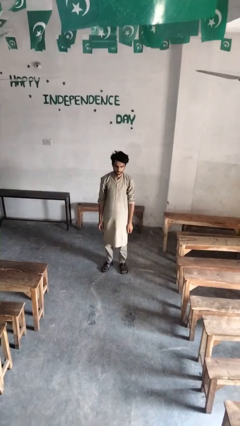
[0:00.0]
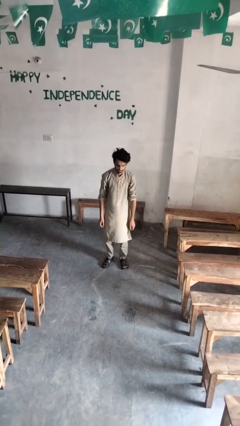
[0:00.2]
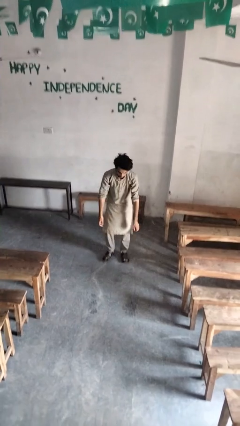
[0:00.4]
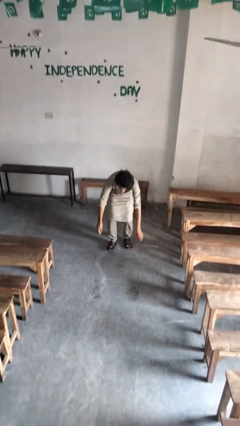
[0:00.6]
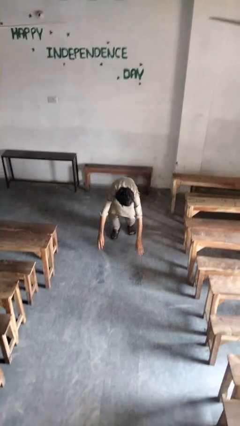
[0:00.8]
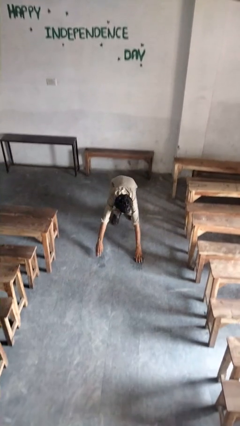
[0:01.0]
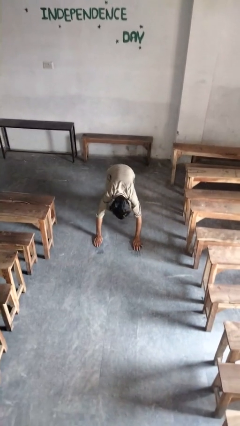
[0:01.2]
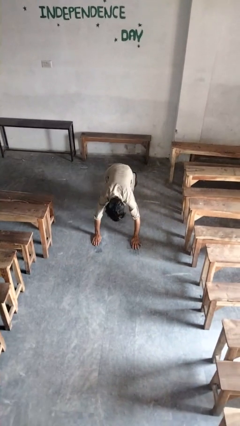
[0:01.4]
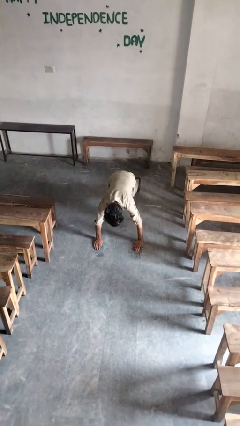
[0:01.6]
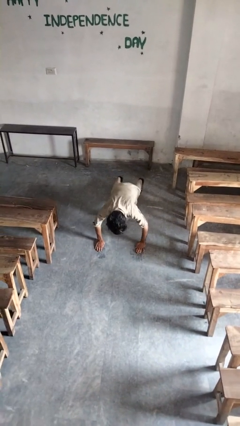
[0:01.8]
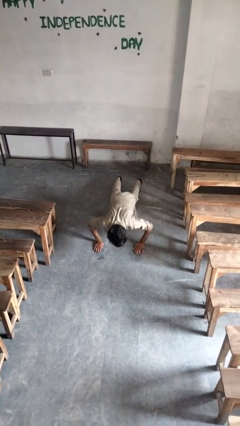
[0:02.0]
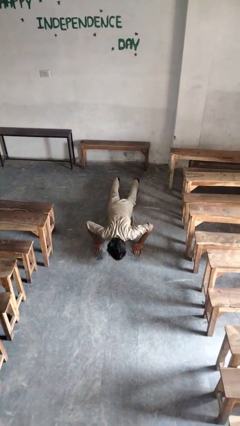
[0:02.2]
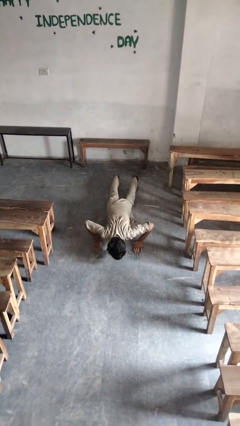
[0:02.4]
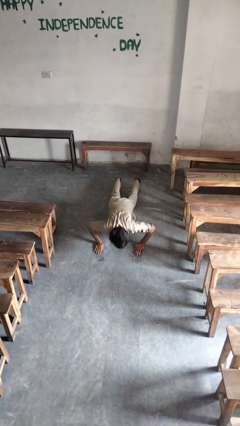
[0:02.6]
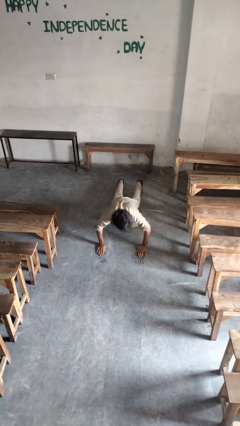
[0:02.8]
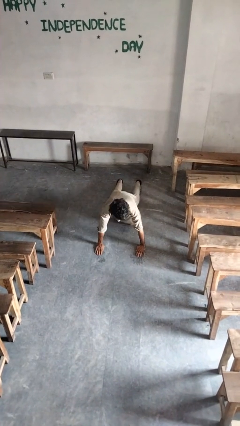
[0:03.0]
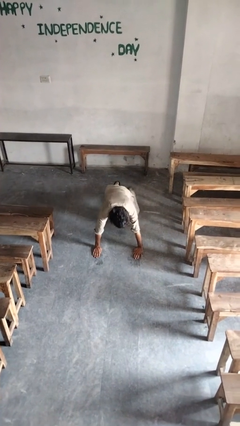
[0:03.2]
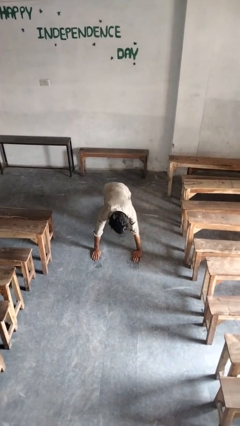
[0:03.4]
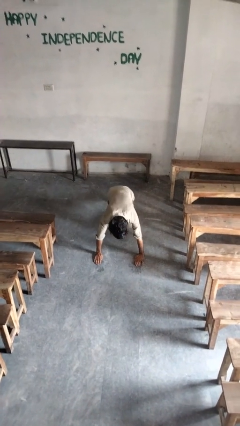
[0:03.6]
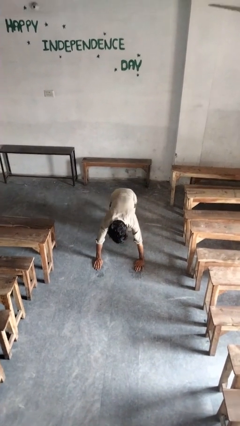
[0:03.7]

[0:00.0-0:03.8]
person exercises with pushup

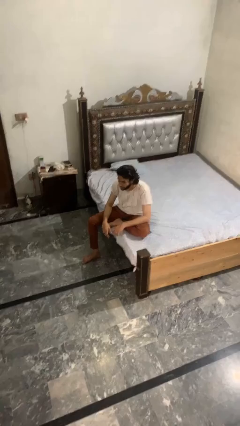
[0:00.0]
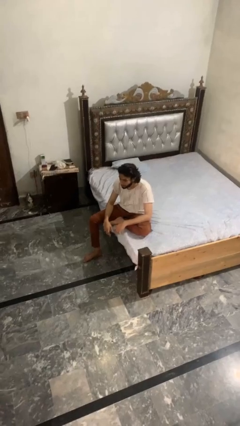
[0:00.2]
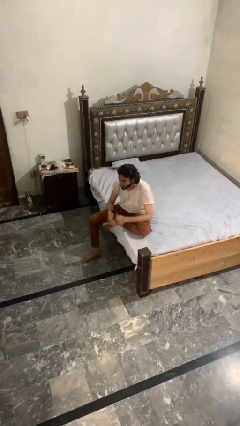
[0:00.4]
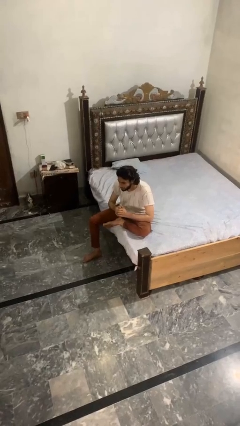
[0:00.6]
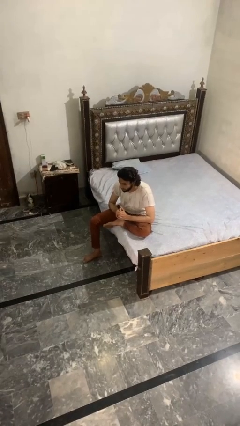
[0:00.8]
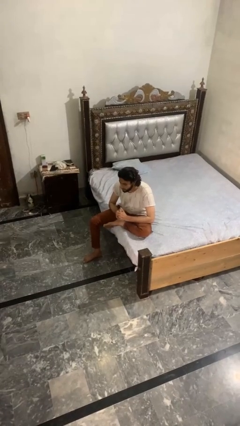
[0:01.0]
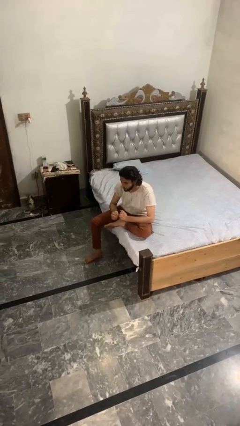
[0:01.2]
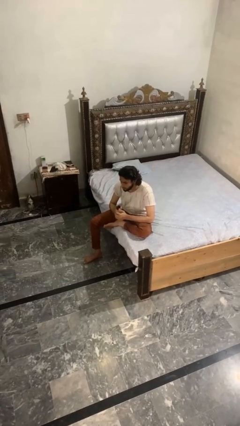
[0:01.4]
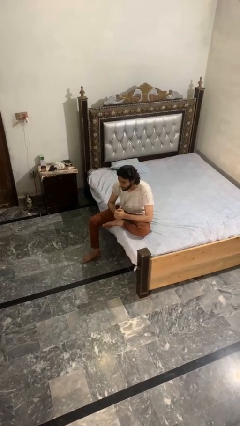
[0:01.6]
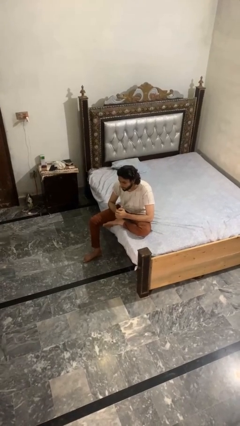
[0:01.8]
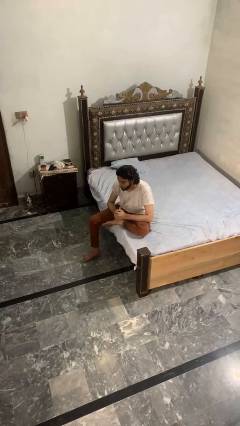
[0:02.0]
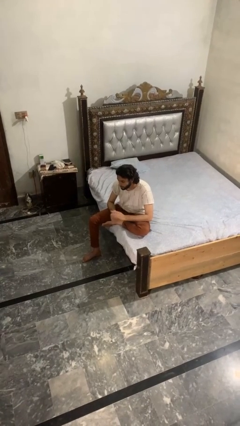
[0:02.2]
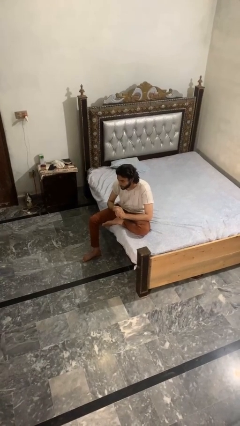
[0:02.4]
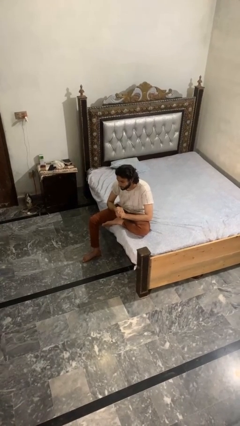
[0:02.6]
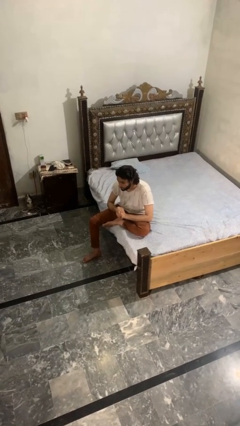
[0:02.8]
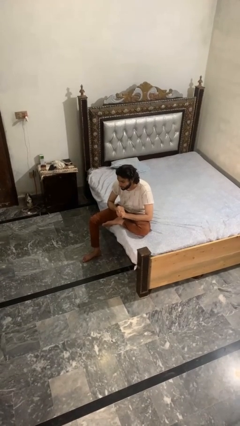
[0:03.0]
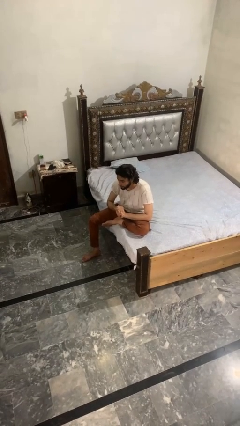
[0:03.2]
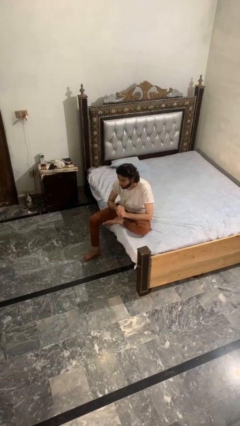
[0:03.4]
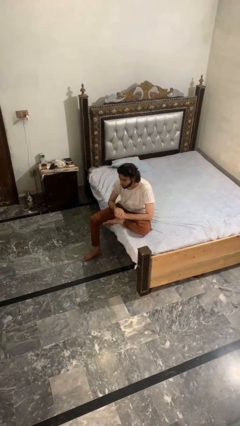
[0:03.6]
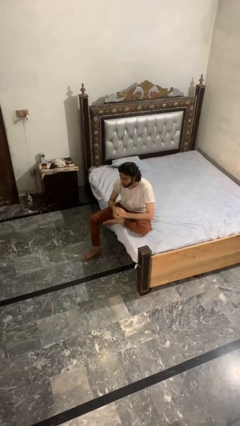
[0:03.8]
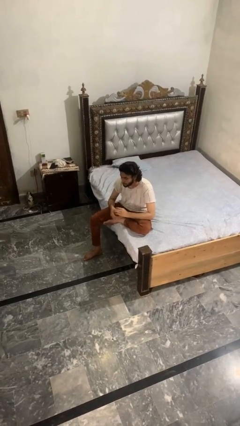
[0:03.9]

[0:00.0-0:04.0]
person cracks knuckles

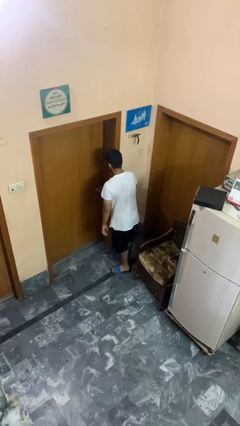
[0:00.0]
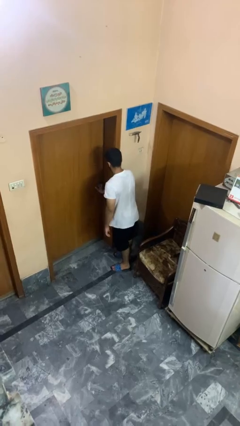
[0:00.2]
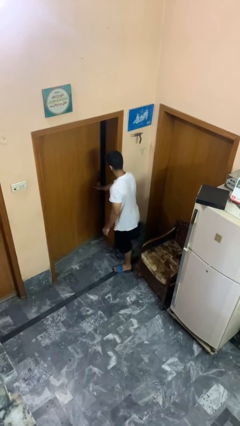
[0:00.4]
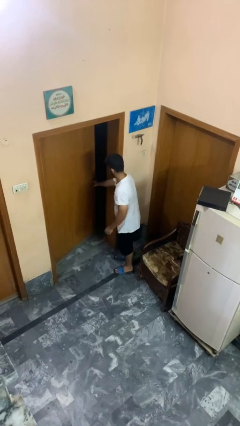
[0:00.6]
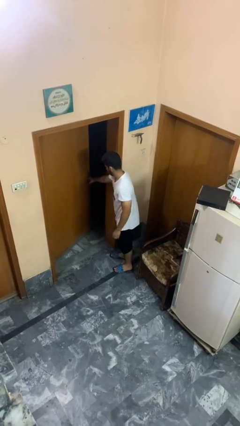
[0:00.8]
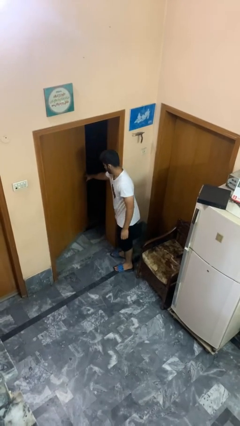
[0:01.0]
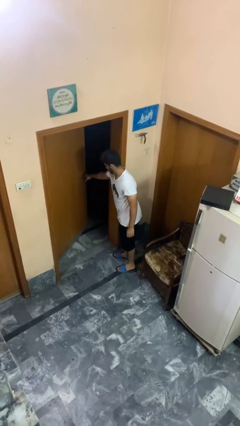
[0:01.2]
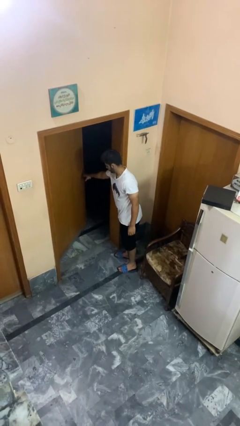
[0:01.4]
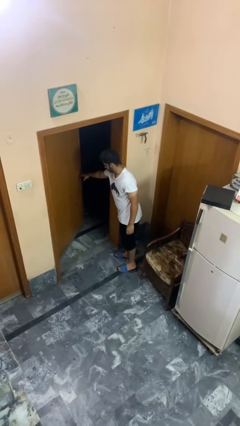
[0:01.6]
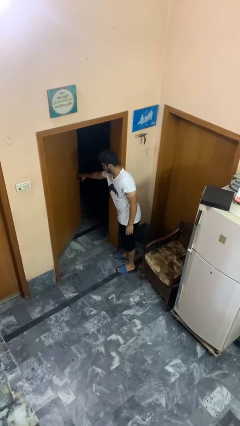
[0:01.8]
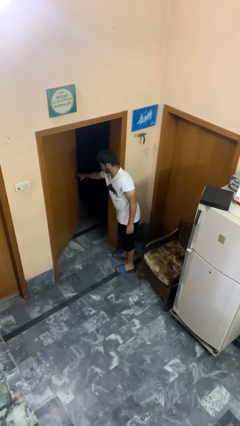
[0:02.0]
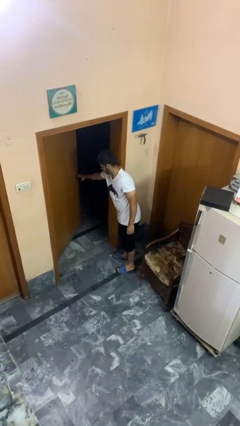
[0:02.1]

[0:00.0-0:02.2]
person opens facility door

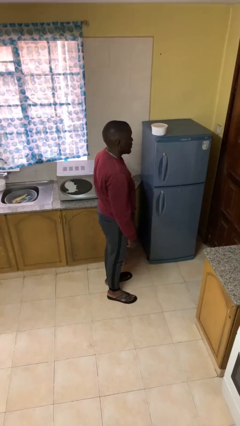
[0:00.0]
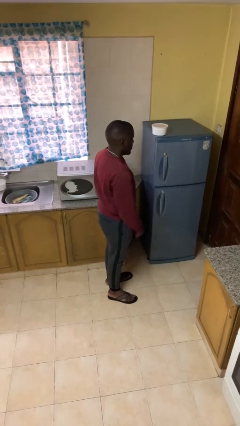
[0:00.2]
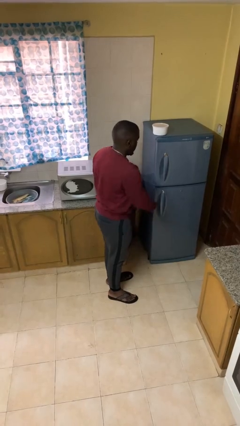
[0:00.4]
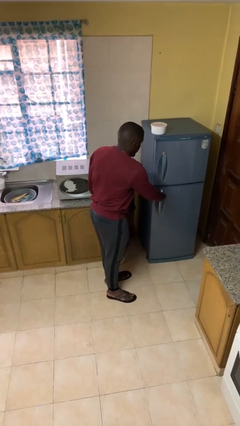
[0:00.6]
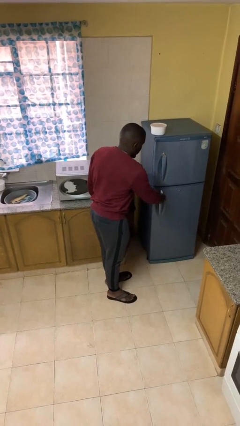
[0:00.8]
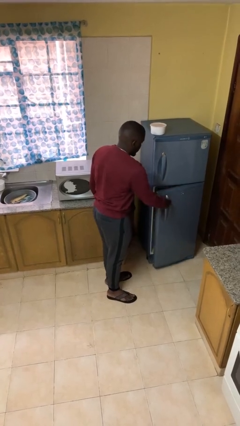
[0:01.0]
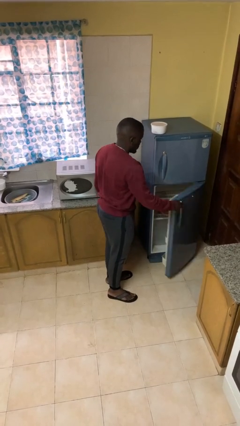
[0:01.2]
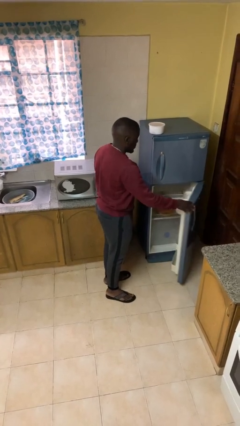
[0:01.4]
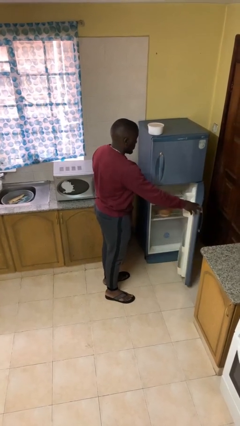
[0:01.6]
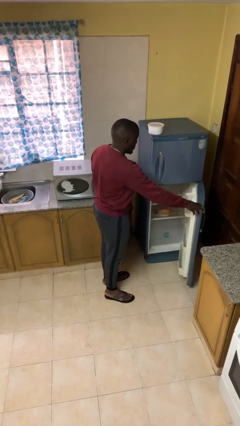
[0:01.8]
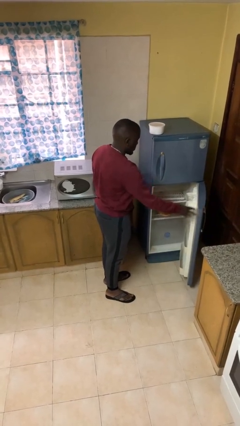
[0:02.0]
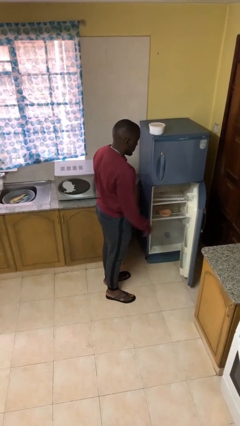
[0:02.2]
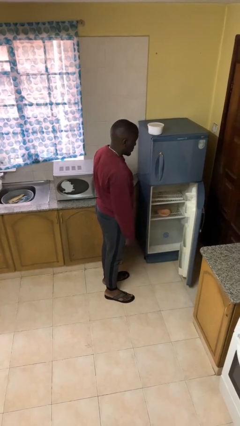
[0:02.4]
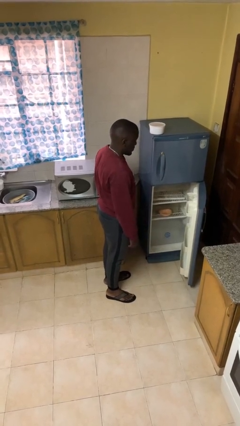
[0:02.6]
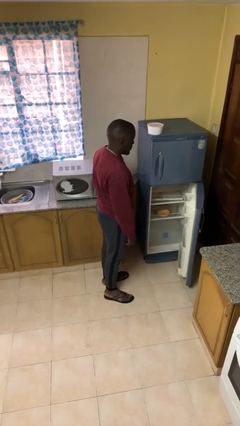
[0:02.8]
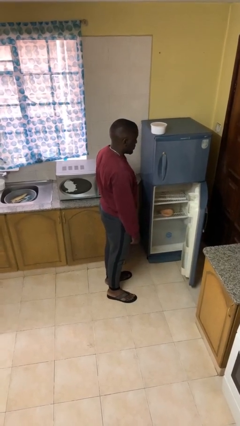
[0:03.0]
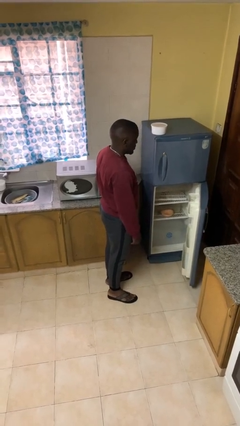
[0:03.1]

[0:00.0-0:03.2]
person opens refrigerator

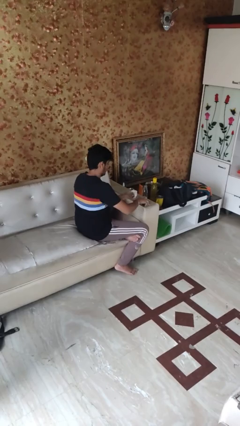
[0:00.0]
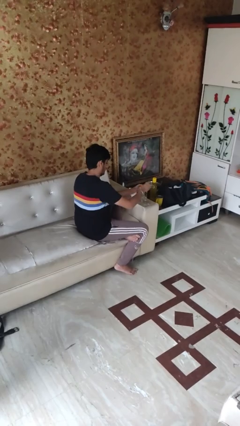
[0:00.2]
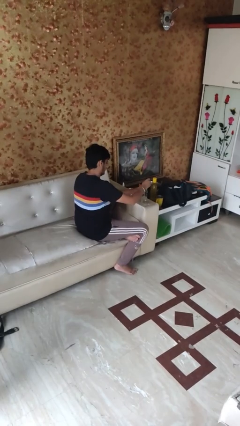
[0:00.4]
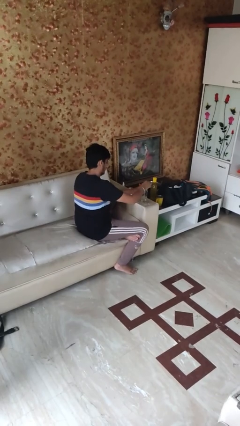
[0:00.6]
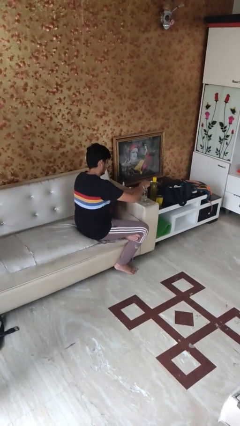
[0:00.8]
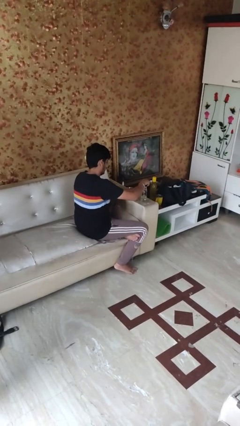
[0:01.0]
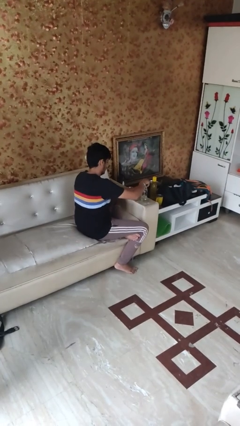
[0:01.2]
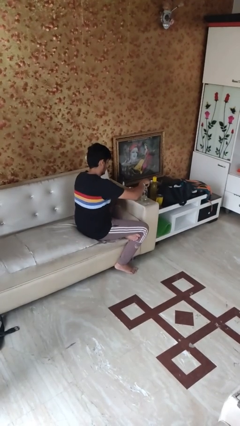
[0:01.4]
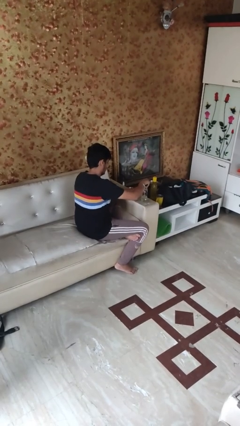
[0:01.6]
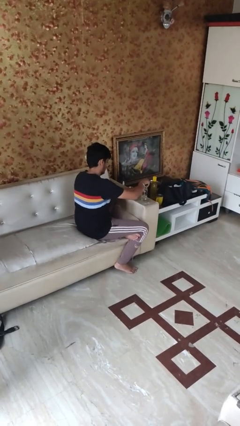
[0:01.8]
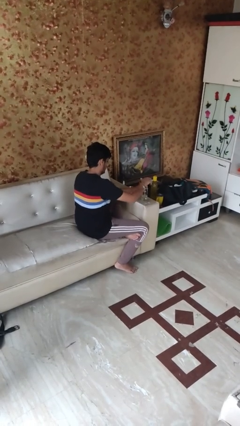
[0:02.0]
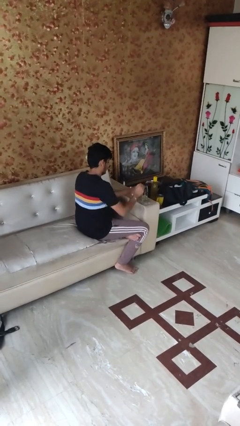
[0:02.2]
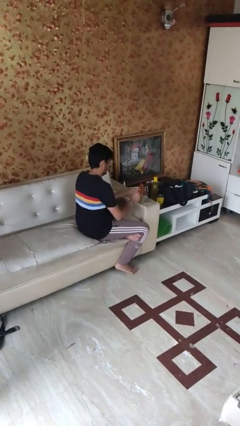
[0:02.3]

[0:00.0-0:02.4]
person screws lid to bottle

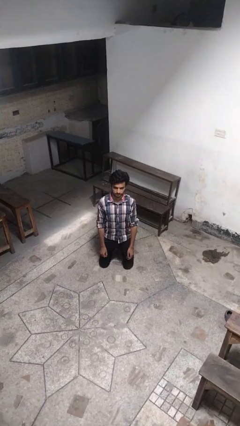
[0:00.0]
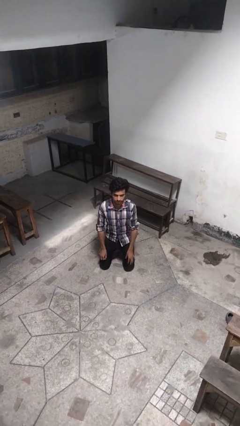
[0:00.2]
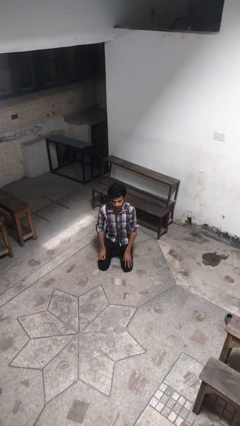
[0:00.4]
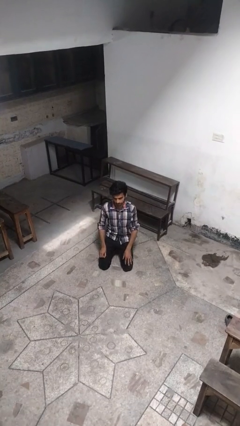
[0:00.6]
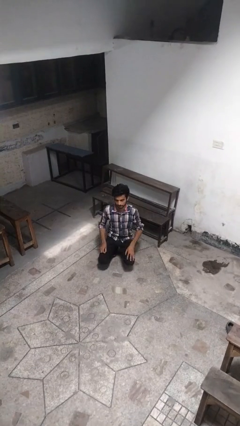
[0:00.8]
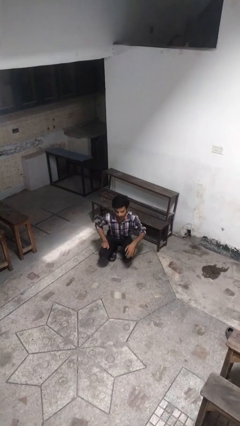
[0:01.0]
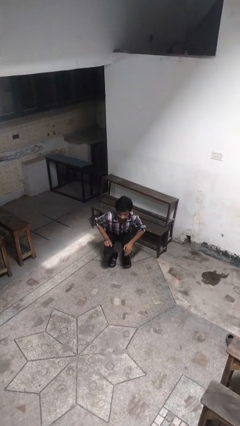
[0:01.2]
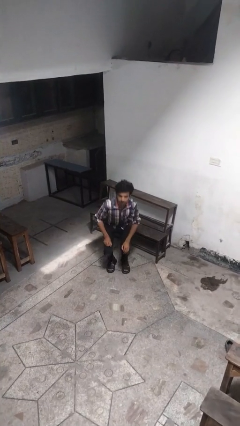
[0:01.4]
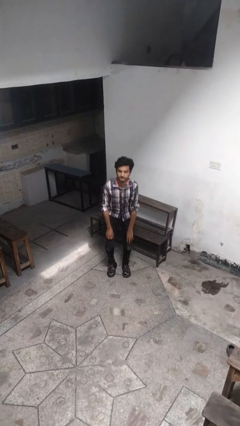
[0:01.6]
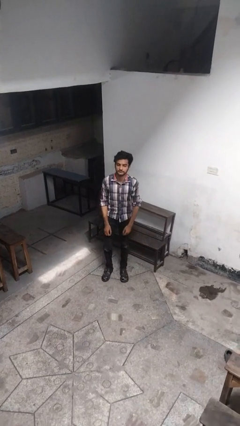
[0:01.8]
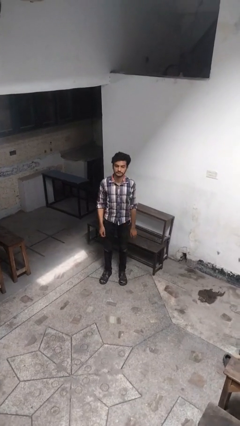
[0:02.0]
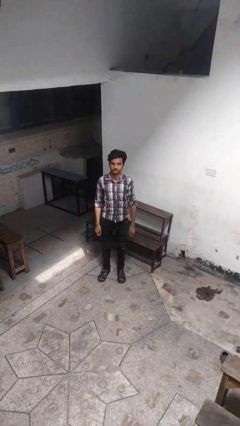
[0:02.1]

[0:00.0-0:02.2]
person stands up from floor
